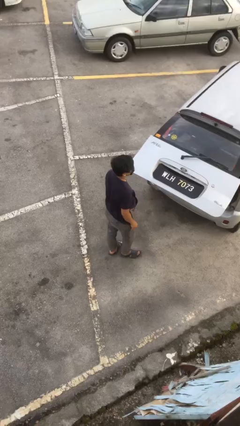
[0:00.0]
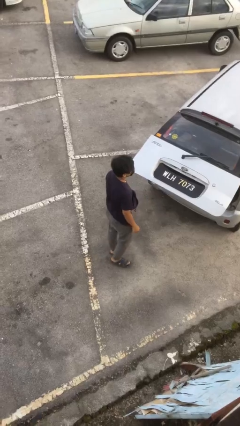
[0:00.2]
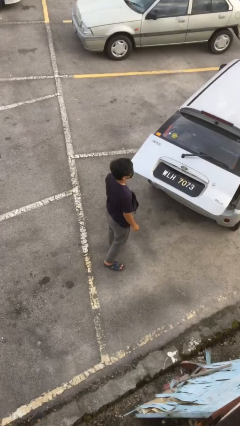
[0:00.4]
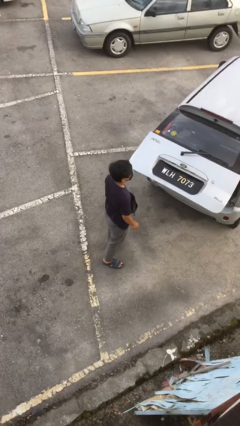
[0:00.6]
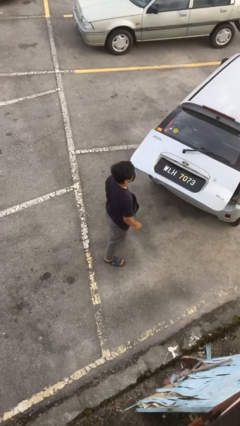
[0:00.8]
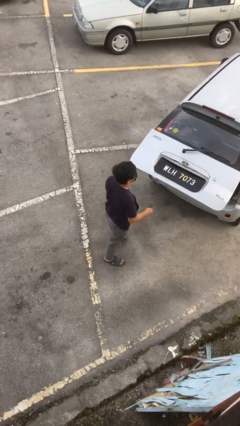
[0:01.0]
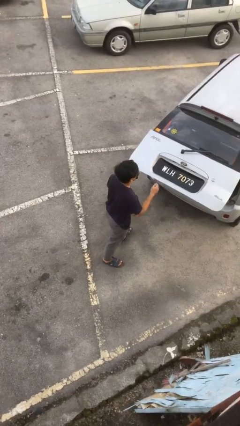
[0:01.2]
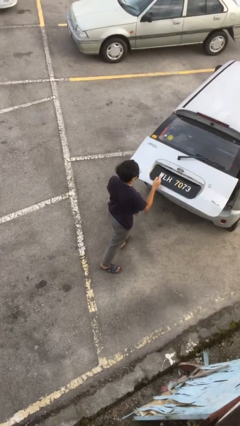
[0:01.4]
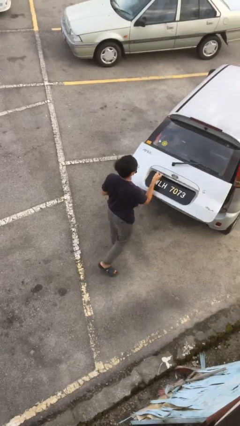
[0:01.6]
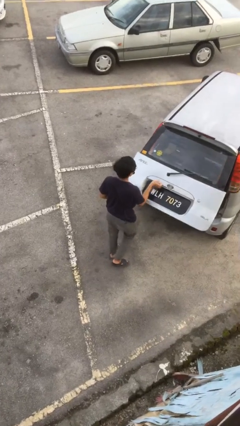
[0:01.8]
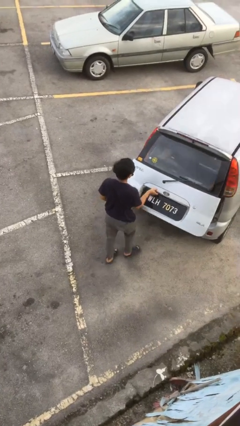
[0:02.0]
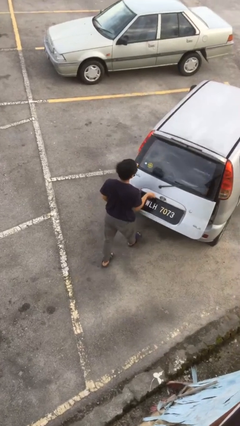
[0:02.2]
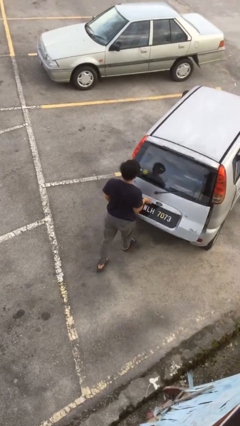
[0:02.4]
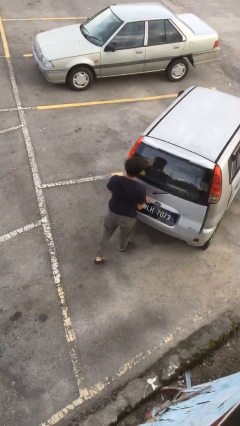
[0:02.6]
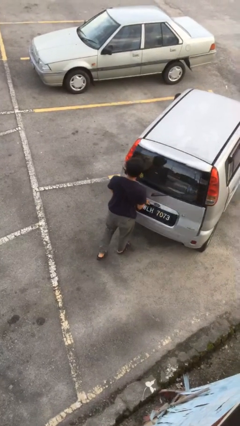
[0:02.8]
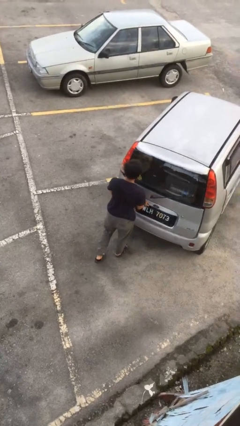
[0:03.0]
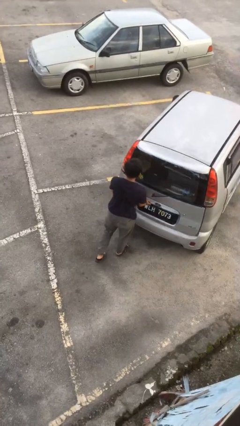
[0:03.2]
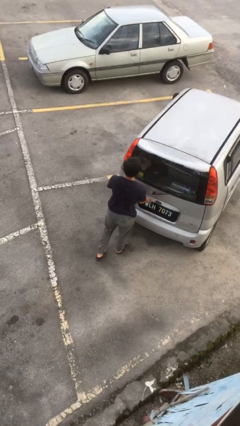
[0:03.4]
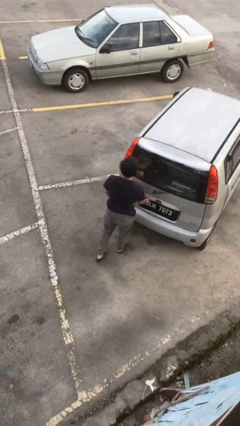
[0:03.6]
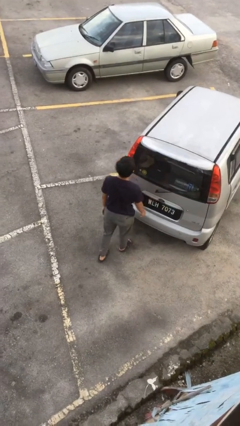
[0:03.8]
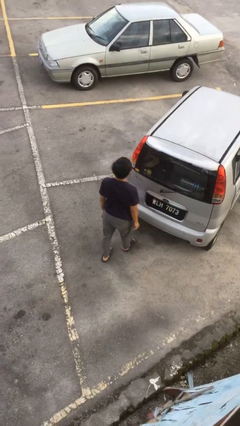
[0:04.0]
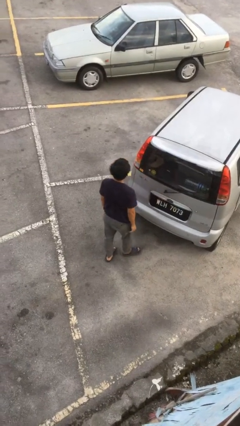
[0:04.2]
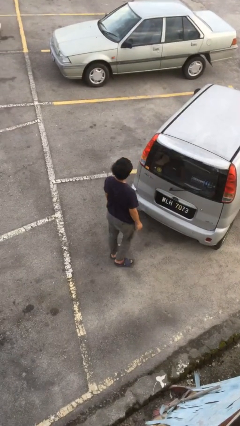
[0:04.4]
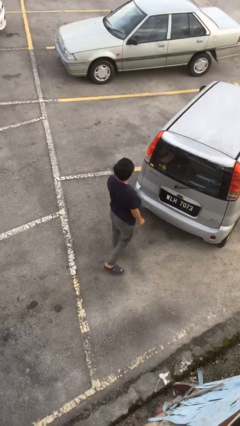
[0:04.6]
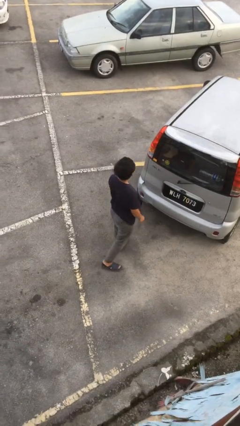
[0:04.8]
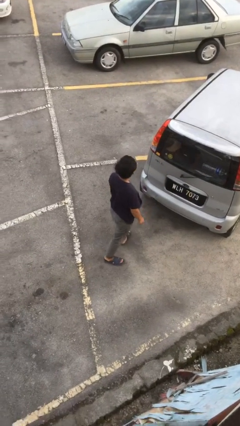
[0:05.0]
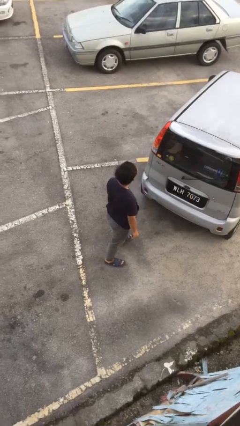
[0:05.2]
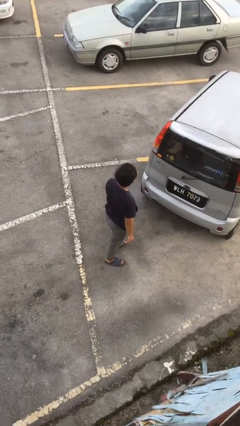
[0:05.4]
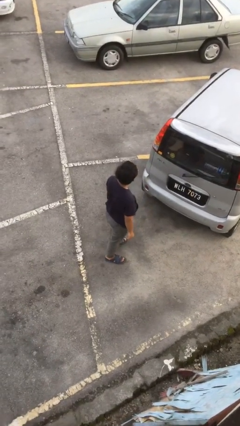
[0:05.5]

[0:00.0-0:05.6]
person closes car trunk

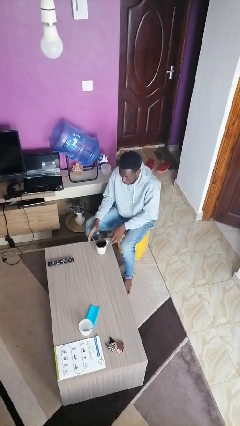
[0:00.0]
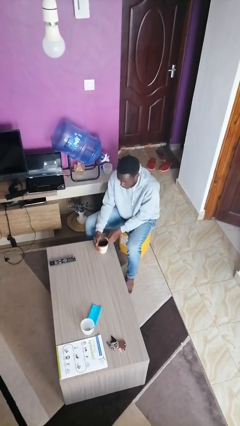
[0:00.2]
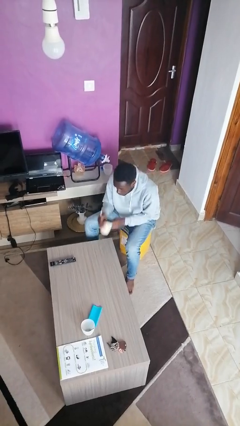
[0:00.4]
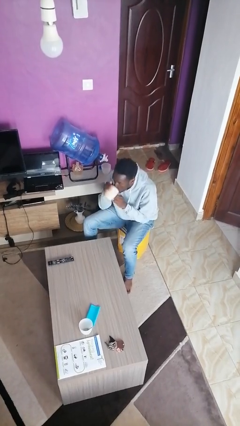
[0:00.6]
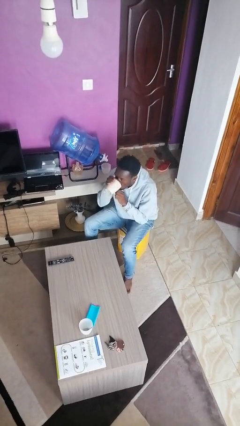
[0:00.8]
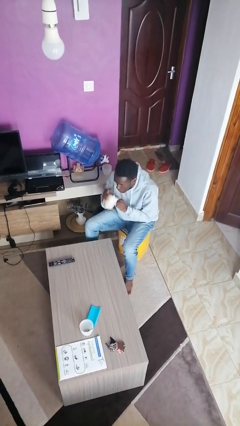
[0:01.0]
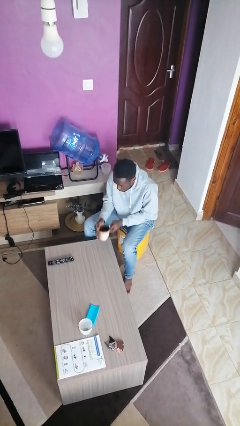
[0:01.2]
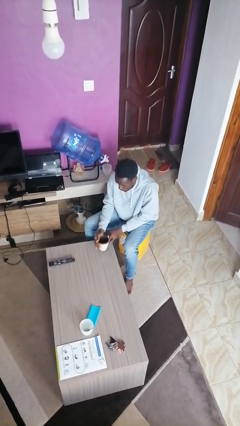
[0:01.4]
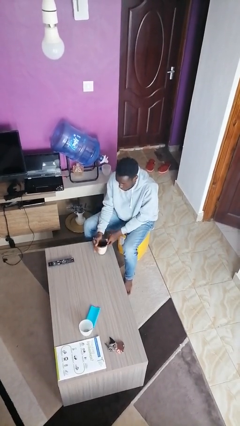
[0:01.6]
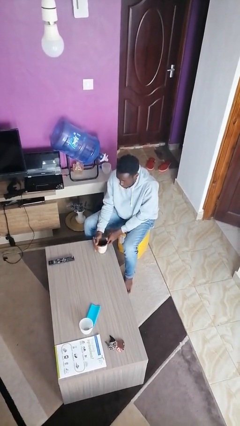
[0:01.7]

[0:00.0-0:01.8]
person drinks from mug

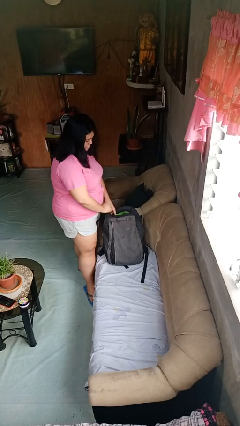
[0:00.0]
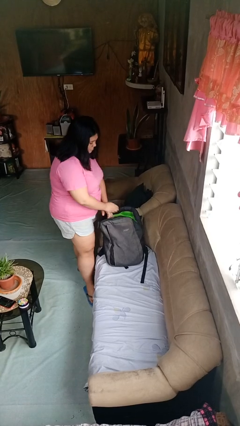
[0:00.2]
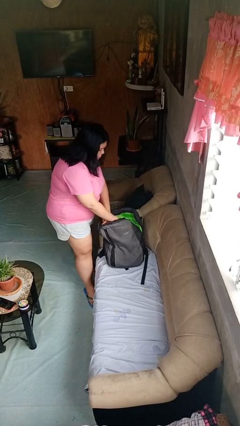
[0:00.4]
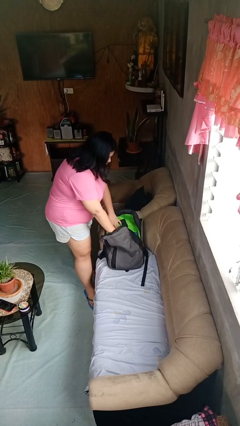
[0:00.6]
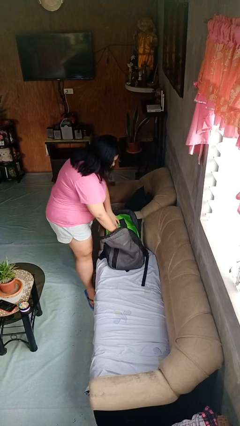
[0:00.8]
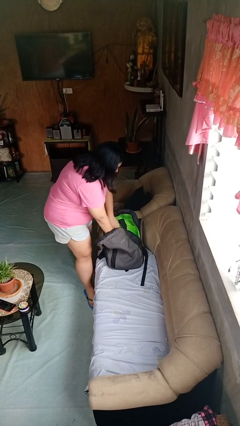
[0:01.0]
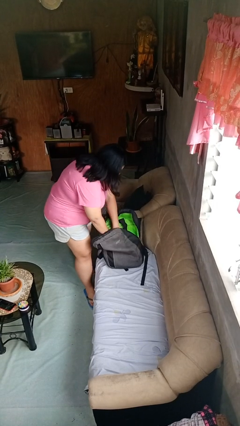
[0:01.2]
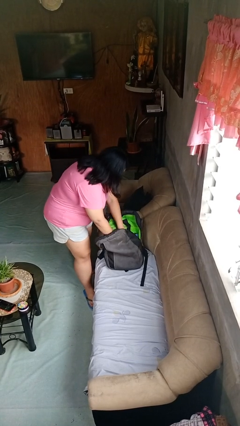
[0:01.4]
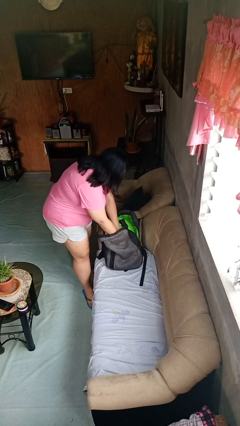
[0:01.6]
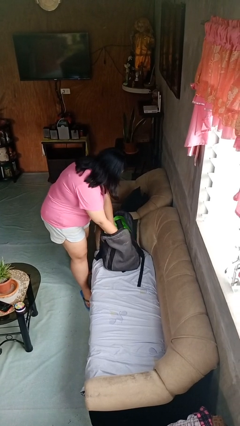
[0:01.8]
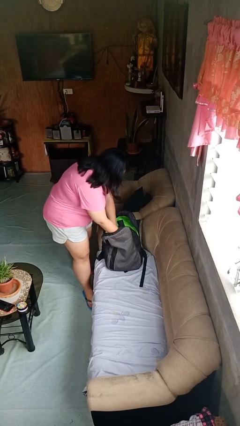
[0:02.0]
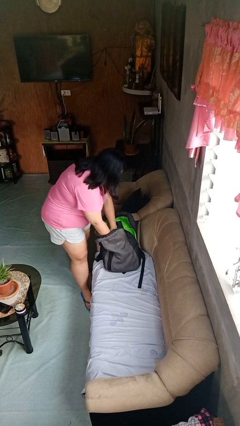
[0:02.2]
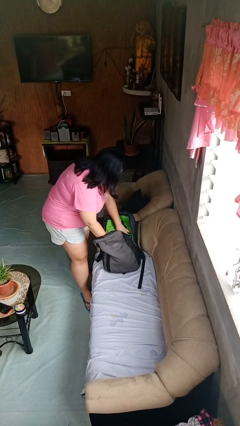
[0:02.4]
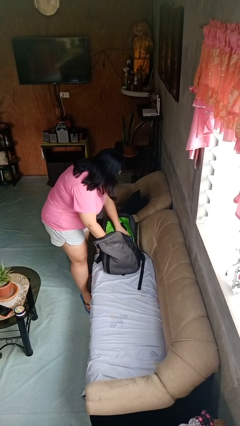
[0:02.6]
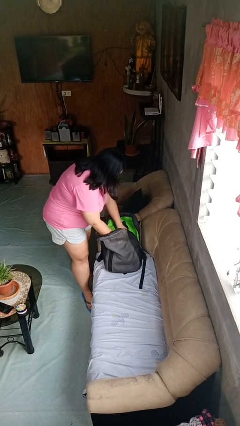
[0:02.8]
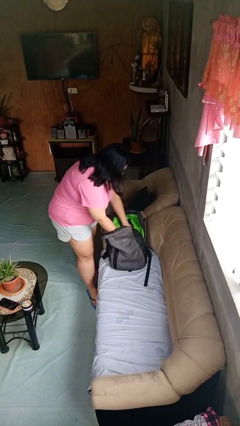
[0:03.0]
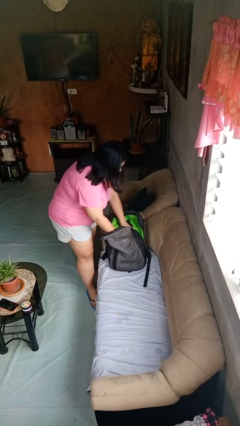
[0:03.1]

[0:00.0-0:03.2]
person searches in backpack

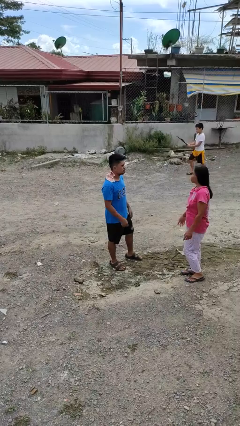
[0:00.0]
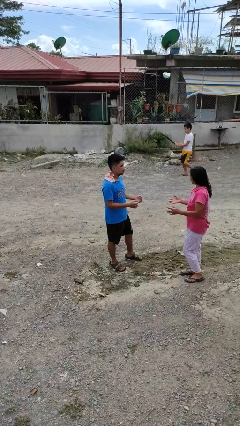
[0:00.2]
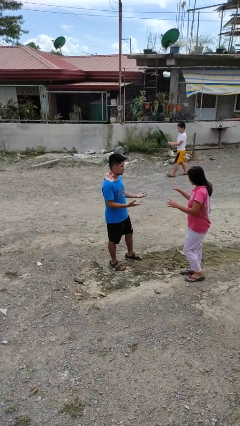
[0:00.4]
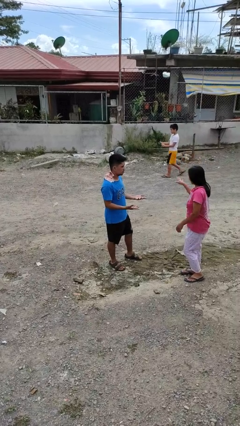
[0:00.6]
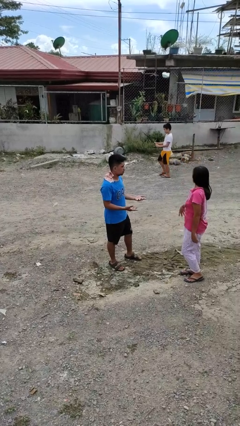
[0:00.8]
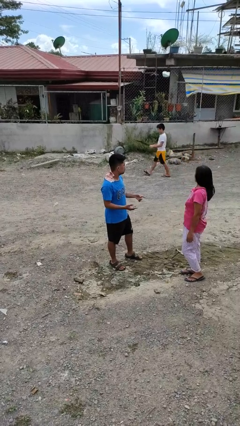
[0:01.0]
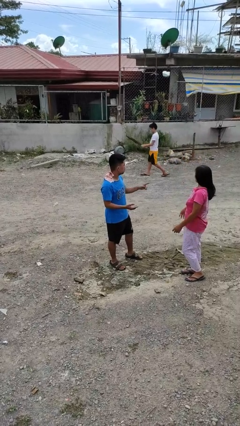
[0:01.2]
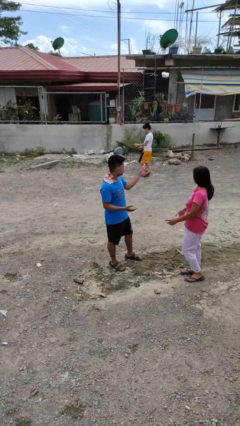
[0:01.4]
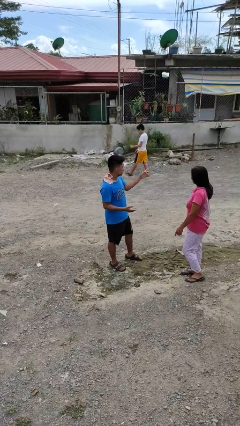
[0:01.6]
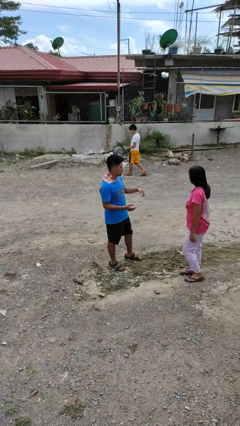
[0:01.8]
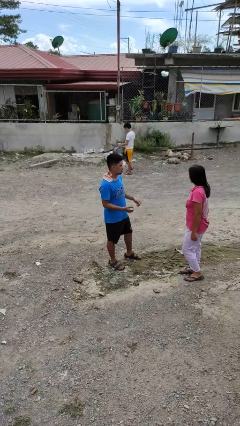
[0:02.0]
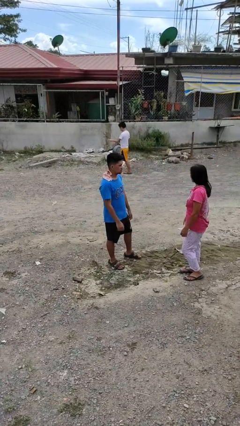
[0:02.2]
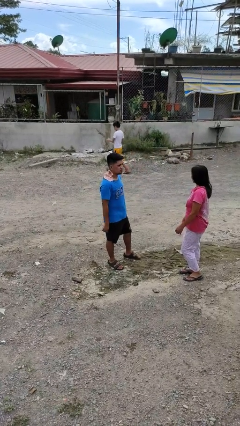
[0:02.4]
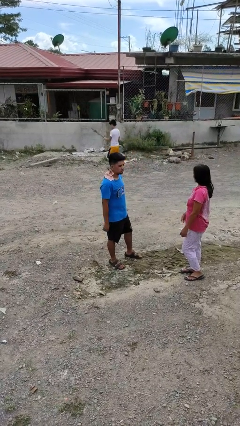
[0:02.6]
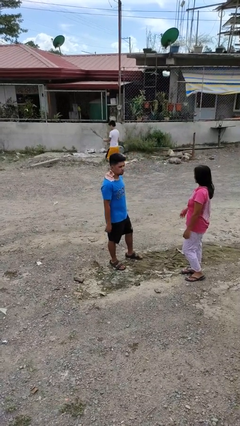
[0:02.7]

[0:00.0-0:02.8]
person talks to person

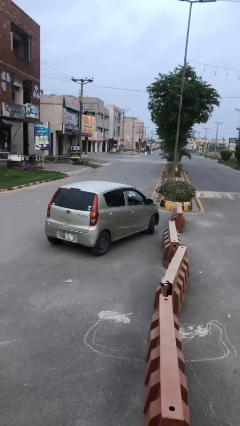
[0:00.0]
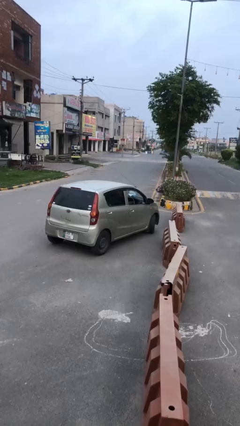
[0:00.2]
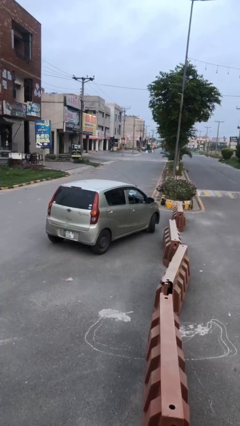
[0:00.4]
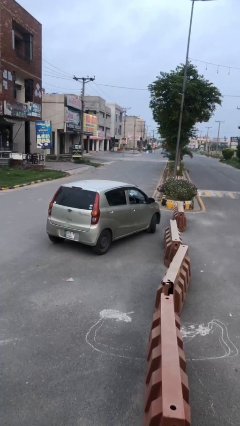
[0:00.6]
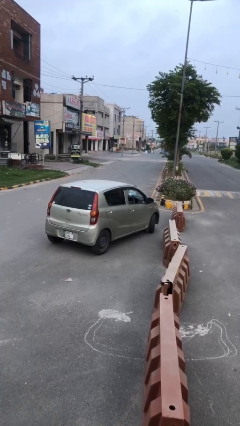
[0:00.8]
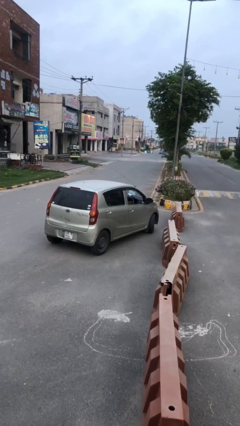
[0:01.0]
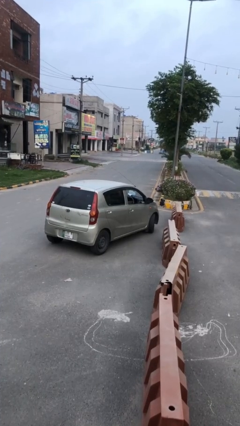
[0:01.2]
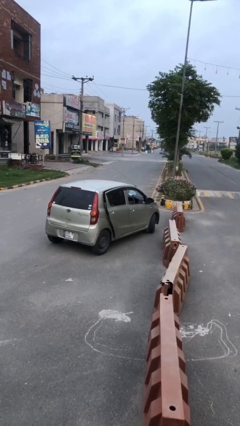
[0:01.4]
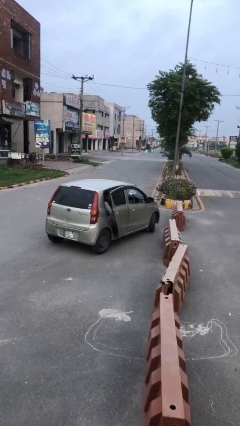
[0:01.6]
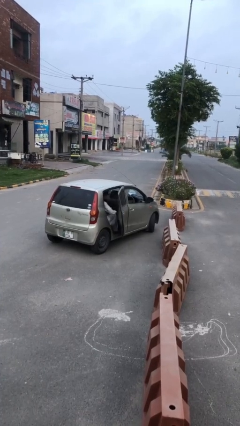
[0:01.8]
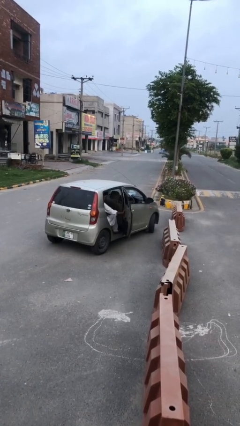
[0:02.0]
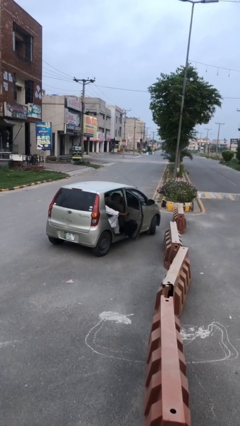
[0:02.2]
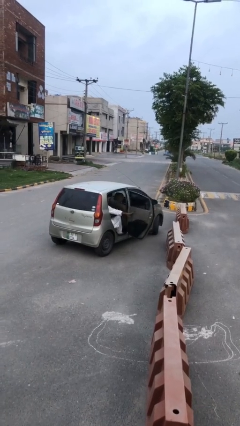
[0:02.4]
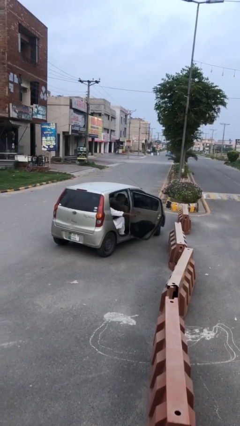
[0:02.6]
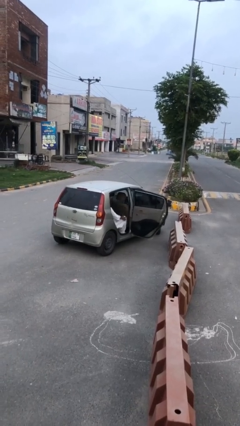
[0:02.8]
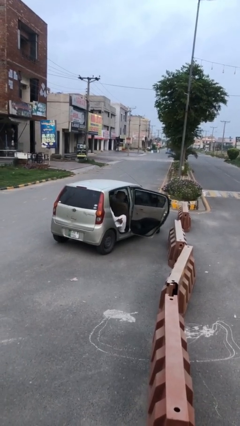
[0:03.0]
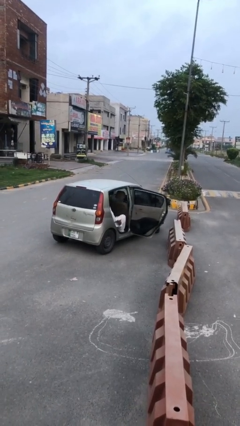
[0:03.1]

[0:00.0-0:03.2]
person opens car door

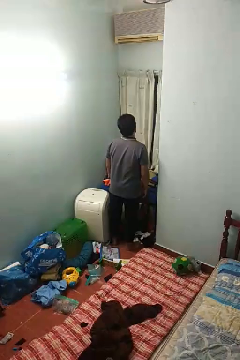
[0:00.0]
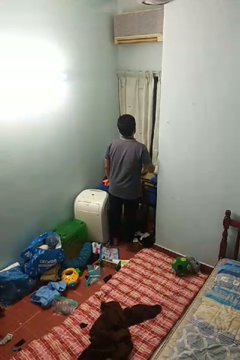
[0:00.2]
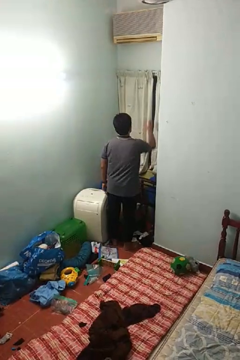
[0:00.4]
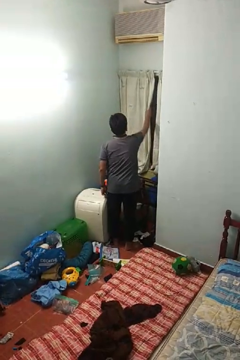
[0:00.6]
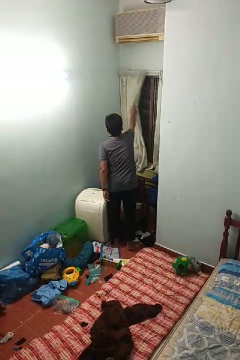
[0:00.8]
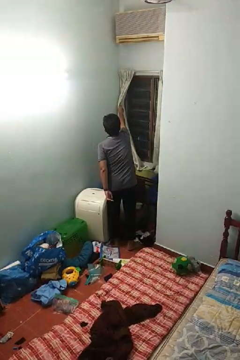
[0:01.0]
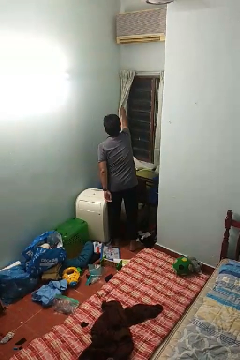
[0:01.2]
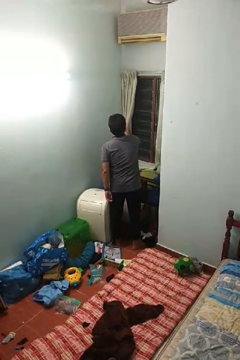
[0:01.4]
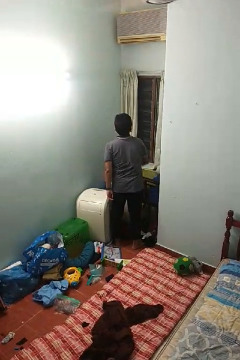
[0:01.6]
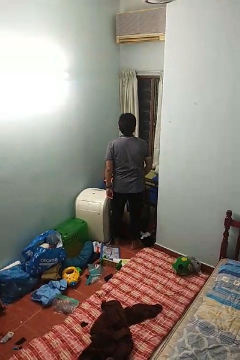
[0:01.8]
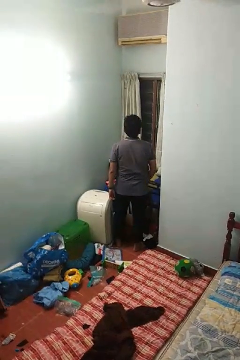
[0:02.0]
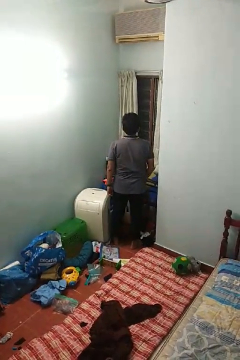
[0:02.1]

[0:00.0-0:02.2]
person opens curtains
